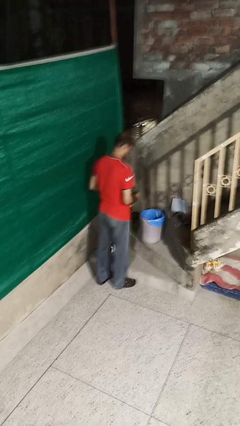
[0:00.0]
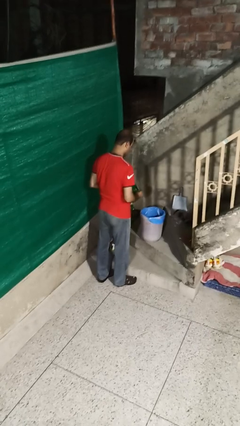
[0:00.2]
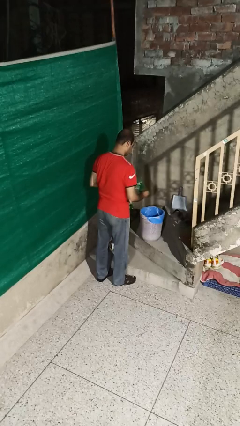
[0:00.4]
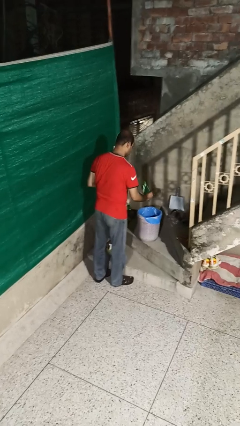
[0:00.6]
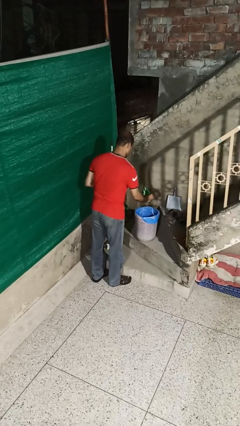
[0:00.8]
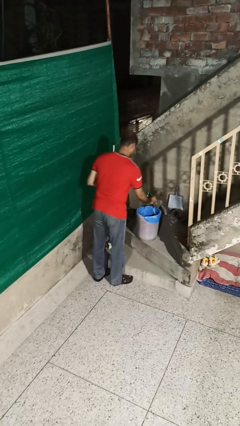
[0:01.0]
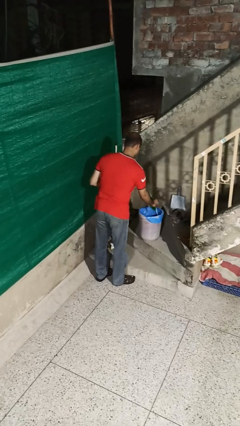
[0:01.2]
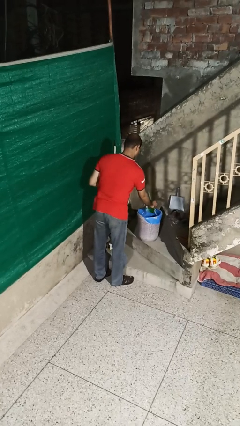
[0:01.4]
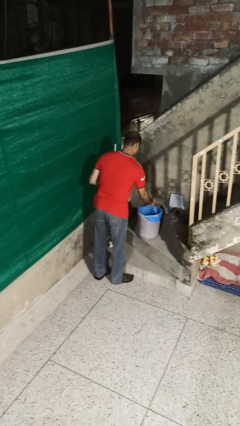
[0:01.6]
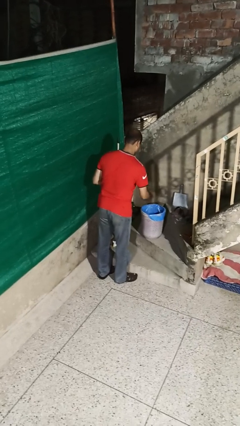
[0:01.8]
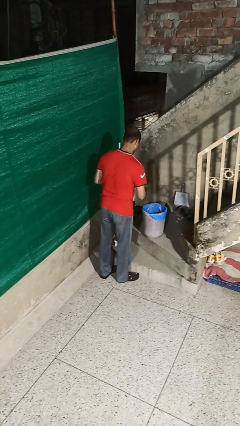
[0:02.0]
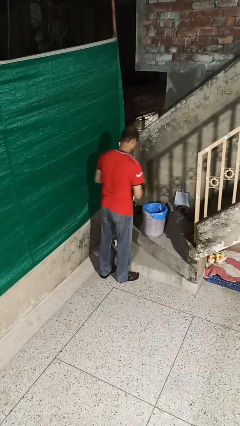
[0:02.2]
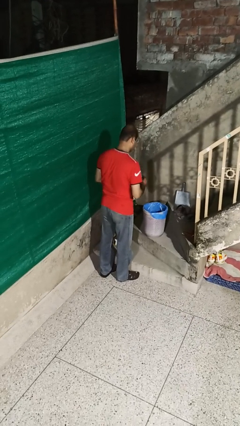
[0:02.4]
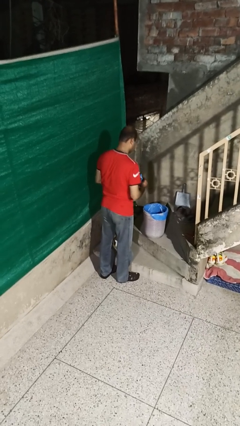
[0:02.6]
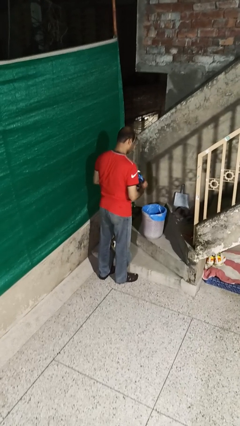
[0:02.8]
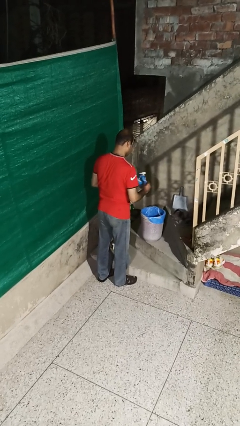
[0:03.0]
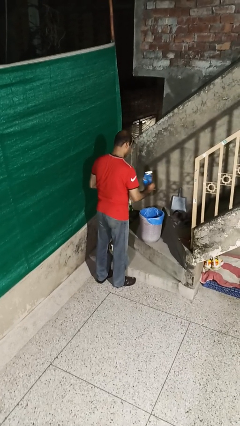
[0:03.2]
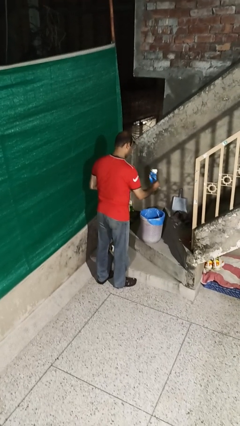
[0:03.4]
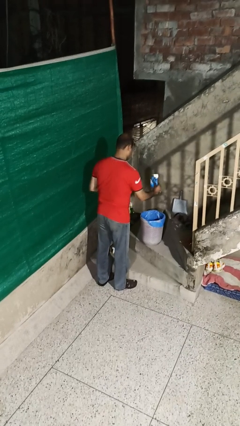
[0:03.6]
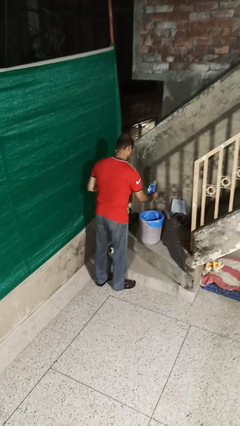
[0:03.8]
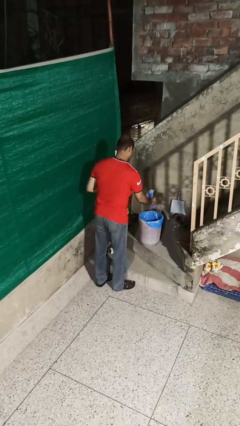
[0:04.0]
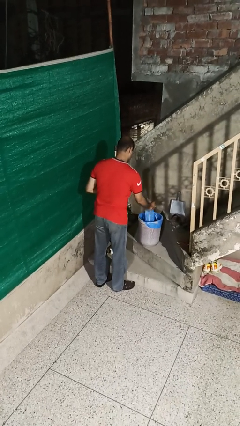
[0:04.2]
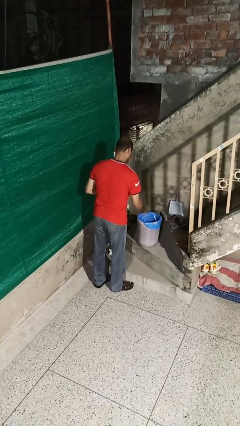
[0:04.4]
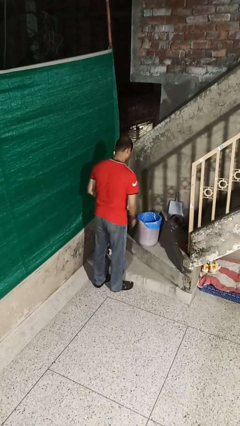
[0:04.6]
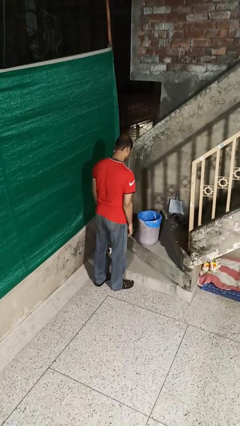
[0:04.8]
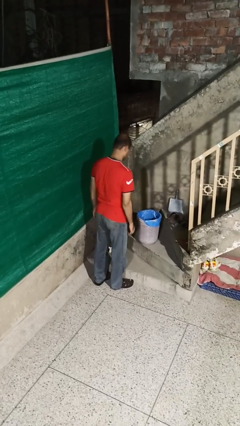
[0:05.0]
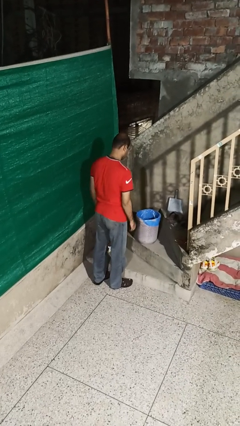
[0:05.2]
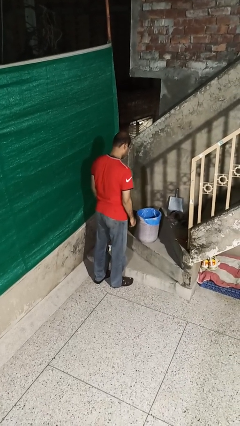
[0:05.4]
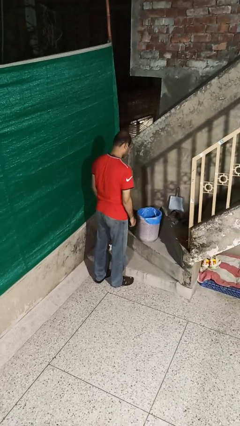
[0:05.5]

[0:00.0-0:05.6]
person discards trash

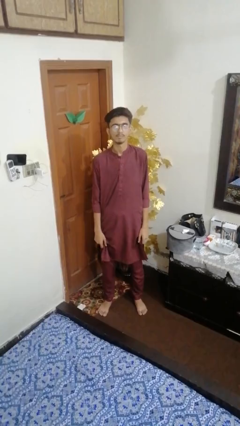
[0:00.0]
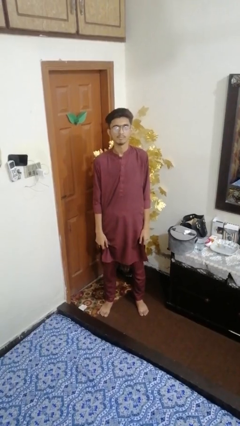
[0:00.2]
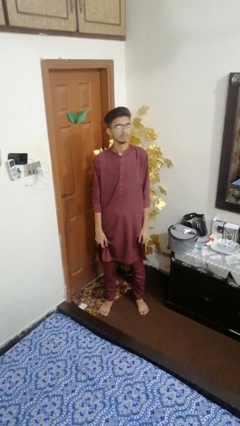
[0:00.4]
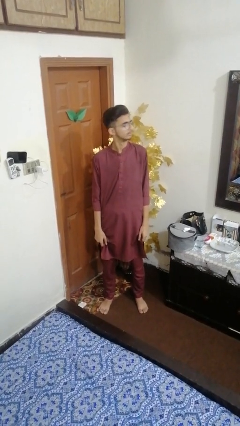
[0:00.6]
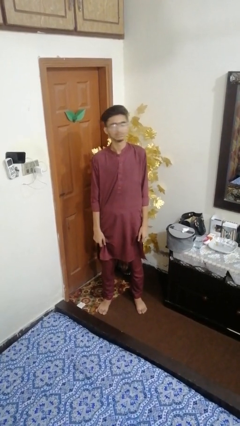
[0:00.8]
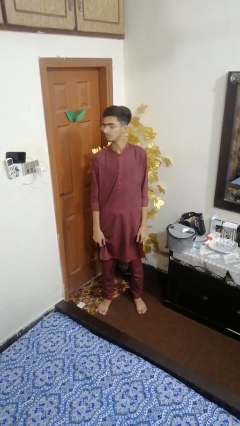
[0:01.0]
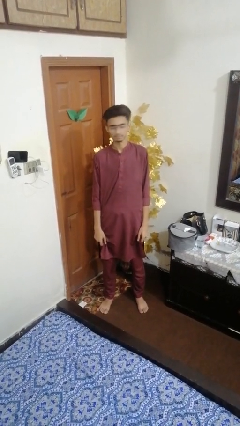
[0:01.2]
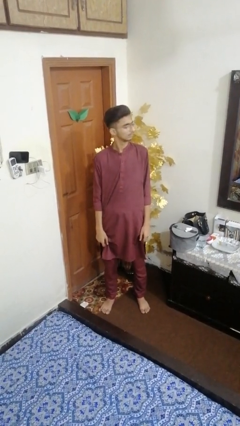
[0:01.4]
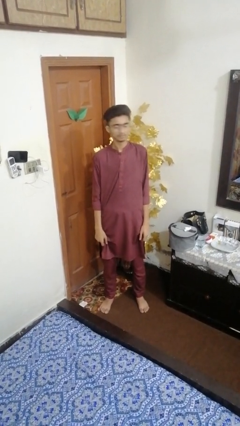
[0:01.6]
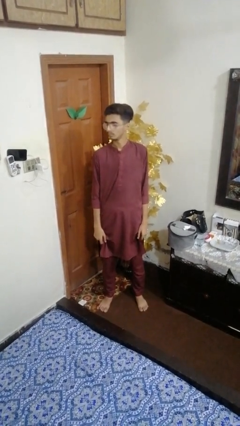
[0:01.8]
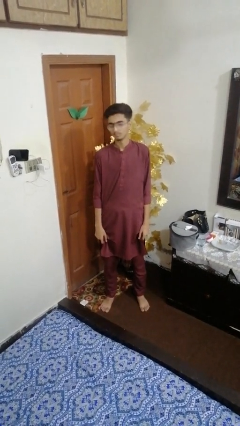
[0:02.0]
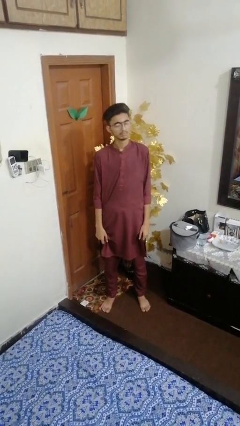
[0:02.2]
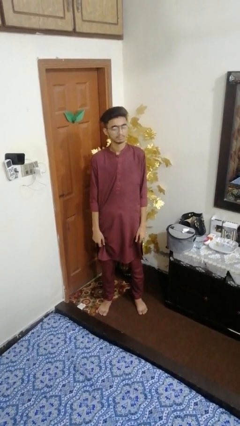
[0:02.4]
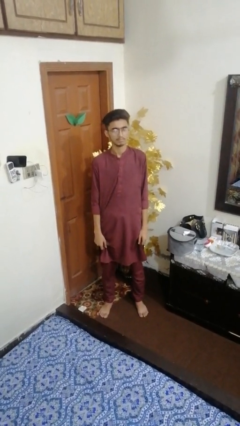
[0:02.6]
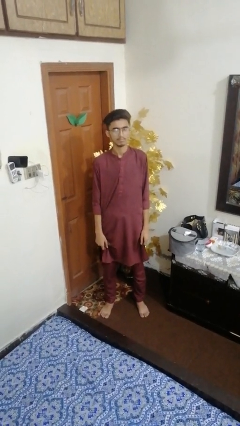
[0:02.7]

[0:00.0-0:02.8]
person shakes head

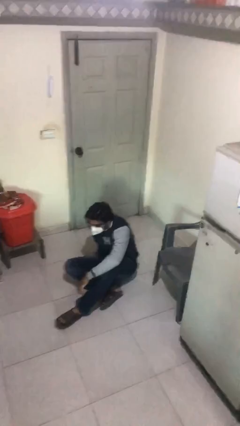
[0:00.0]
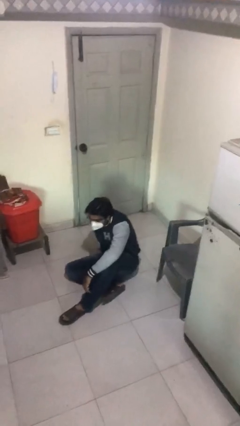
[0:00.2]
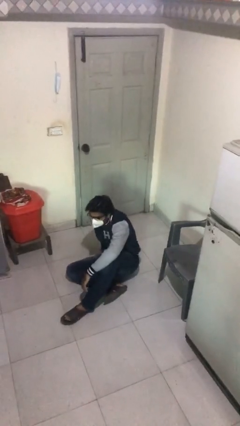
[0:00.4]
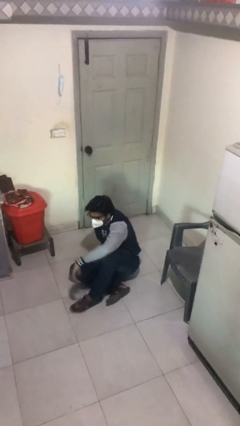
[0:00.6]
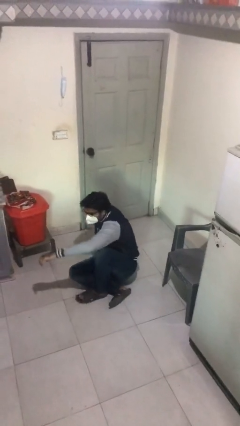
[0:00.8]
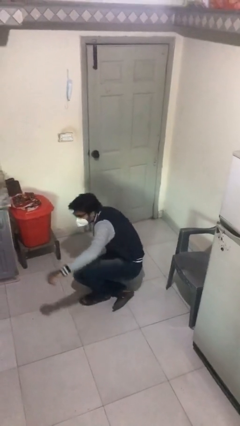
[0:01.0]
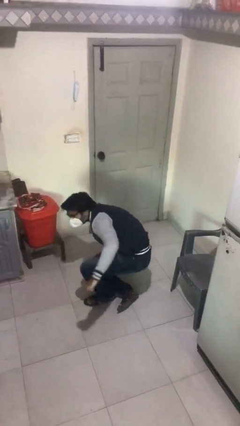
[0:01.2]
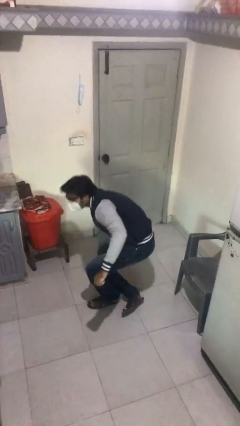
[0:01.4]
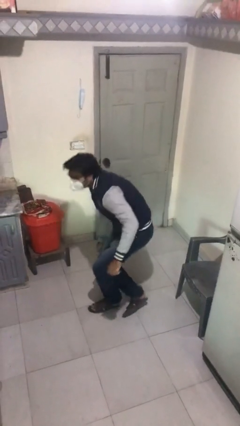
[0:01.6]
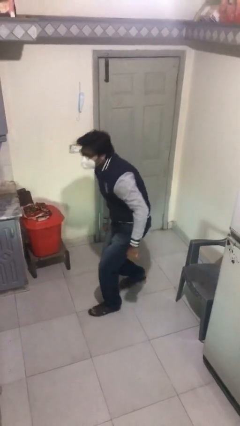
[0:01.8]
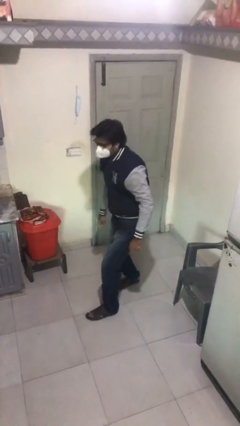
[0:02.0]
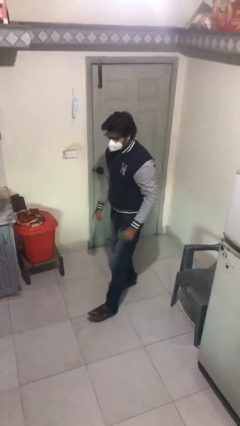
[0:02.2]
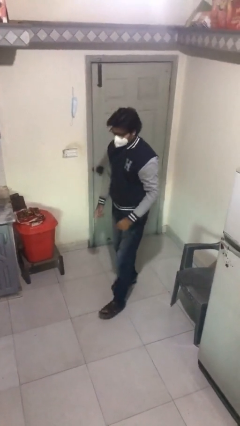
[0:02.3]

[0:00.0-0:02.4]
person stands up

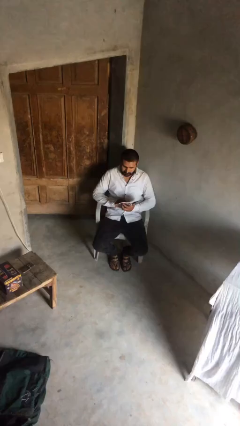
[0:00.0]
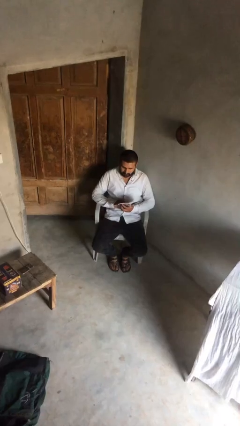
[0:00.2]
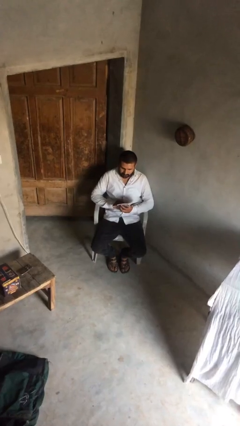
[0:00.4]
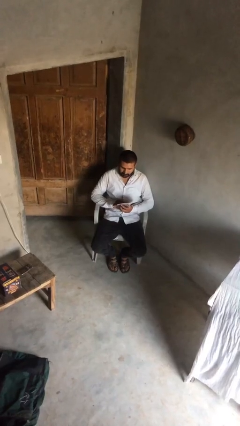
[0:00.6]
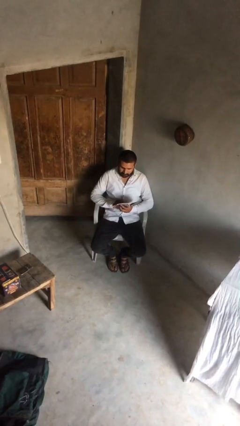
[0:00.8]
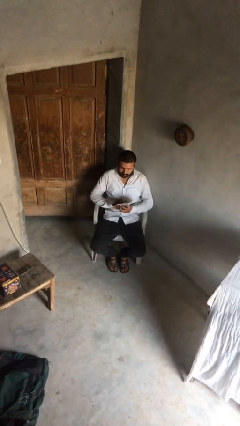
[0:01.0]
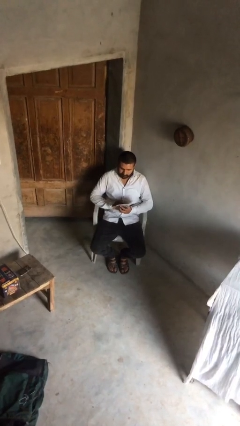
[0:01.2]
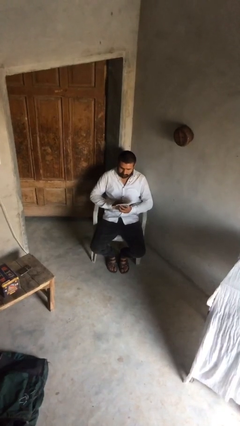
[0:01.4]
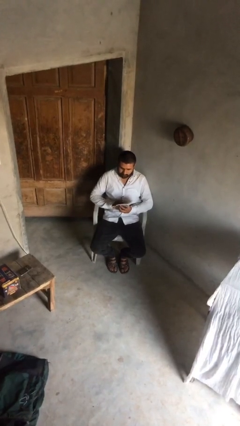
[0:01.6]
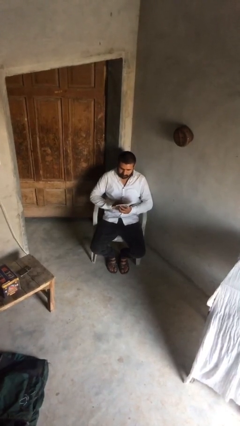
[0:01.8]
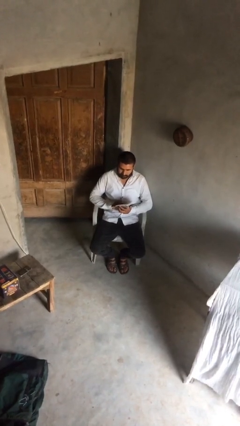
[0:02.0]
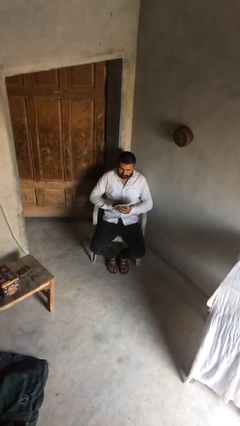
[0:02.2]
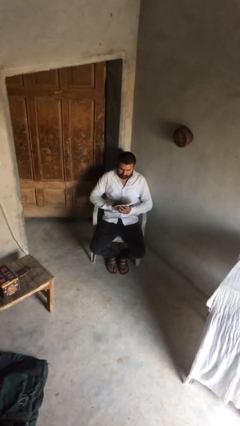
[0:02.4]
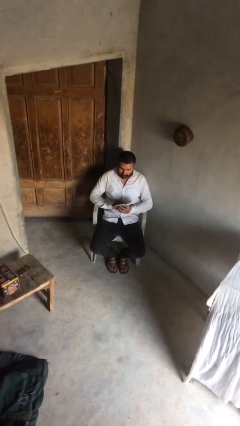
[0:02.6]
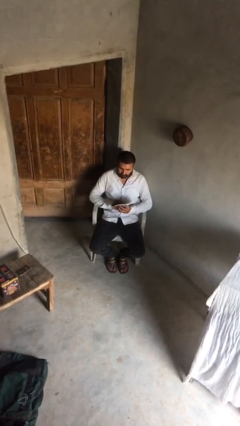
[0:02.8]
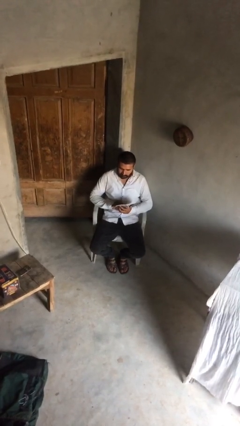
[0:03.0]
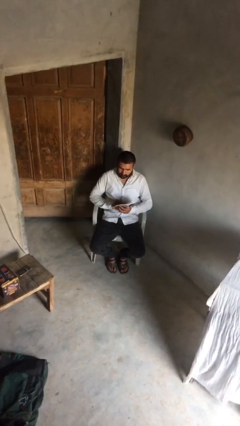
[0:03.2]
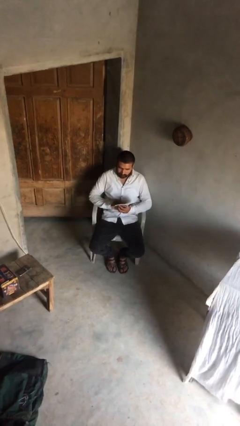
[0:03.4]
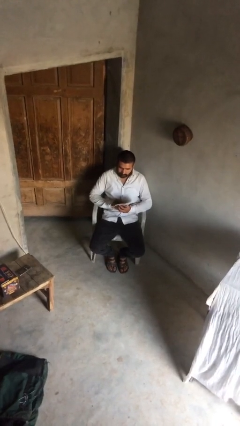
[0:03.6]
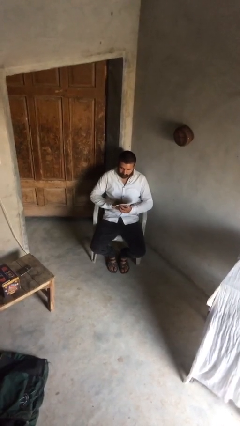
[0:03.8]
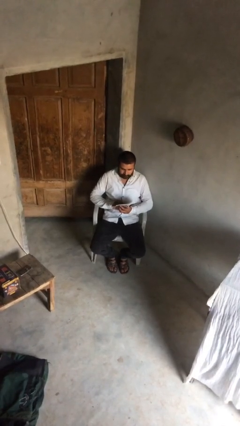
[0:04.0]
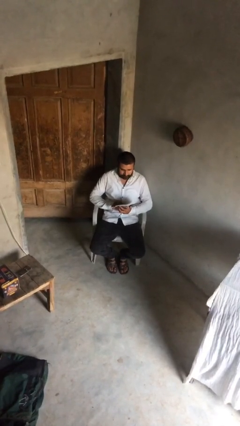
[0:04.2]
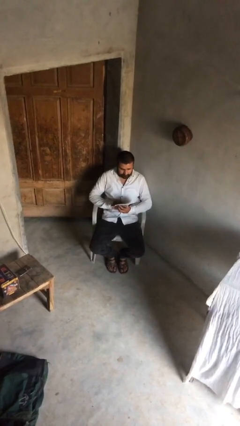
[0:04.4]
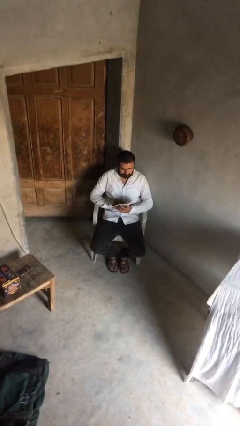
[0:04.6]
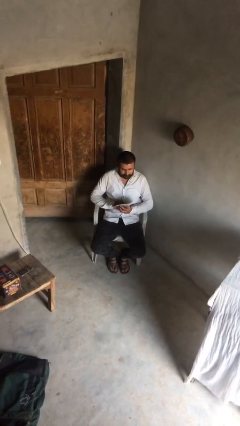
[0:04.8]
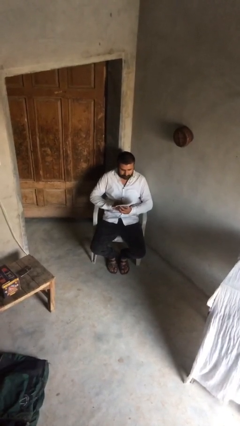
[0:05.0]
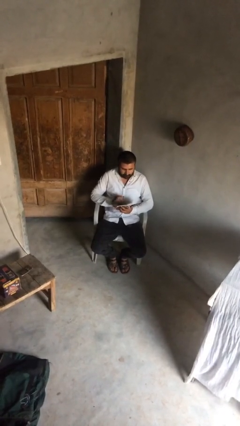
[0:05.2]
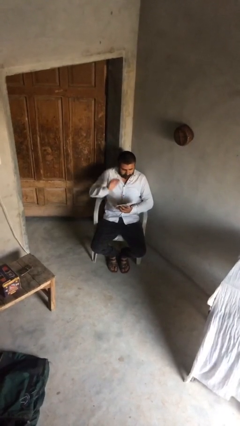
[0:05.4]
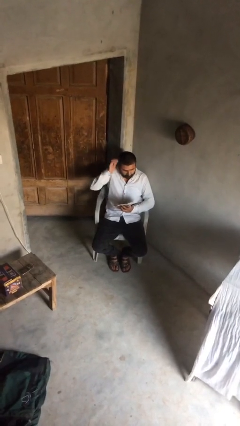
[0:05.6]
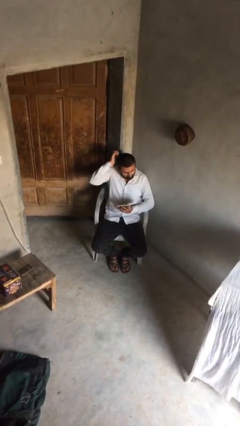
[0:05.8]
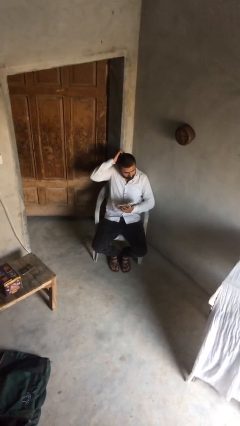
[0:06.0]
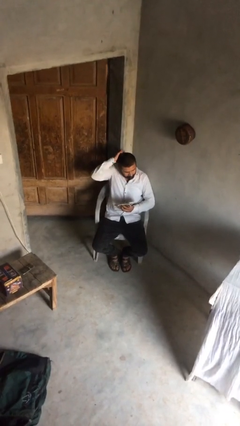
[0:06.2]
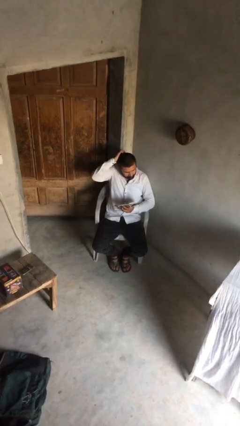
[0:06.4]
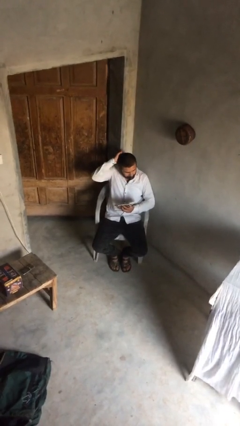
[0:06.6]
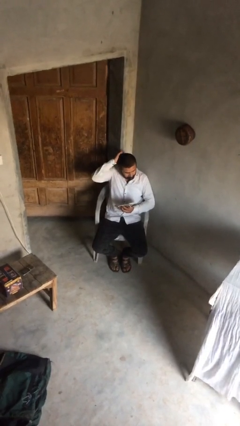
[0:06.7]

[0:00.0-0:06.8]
person reads document

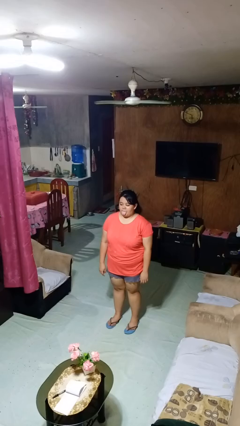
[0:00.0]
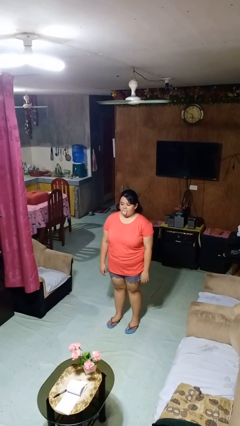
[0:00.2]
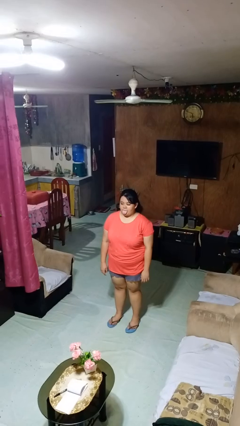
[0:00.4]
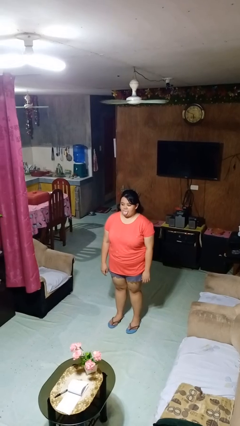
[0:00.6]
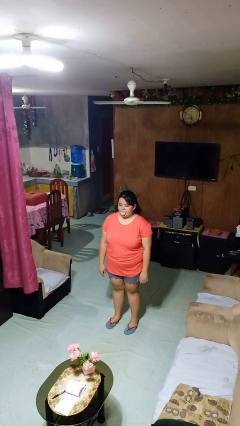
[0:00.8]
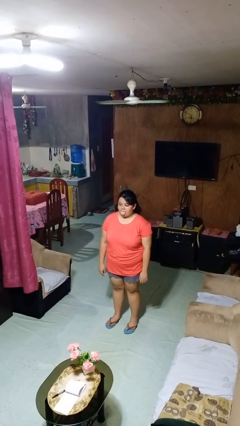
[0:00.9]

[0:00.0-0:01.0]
person sticks out tongue
